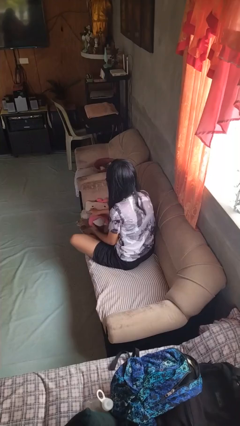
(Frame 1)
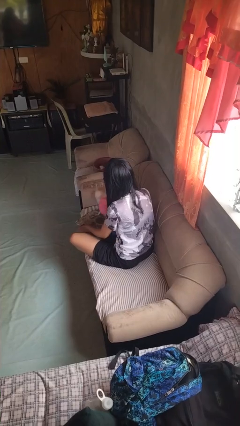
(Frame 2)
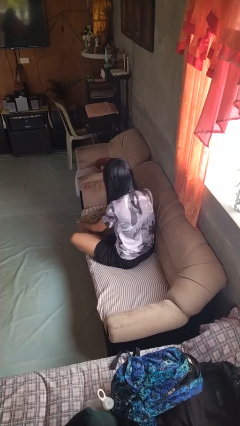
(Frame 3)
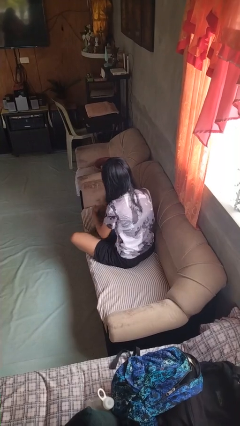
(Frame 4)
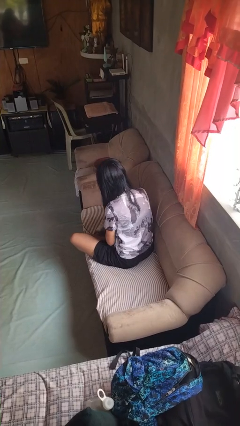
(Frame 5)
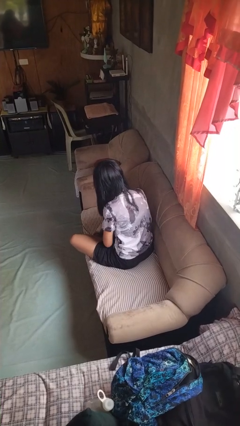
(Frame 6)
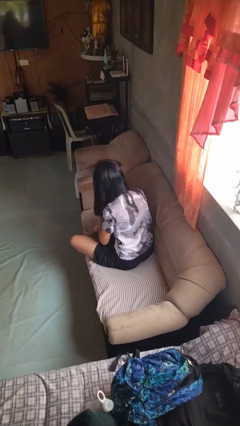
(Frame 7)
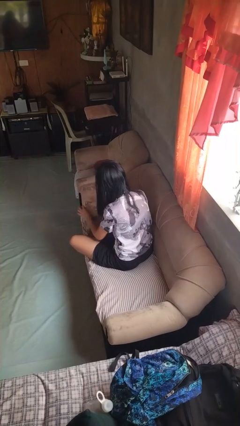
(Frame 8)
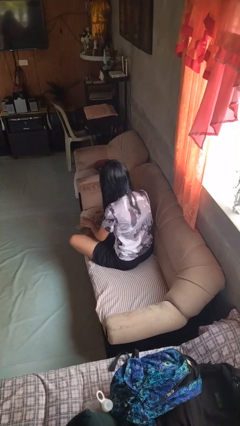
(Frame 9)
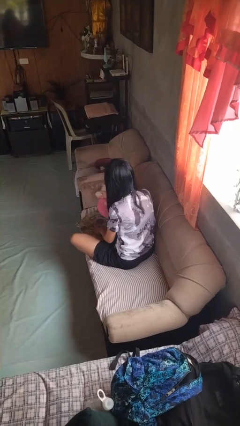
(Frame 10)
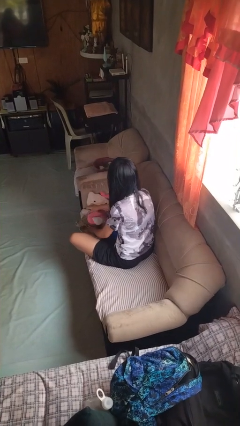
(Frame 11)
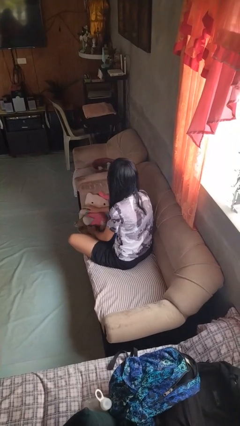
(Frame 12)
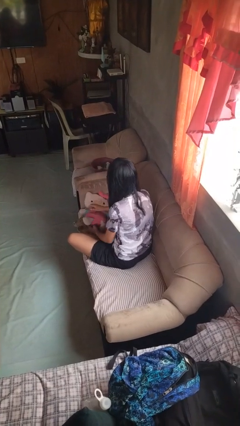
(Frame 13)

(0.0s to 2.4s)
person searches in couch

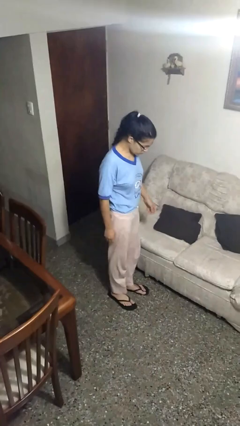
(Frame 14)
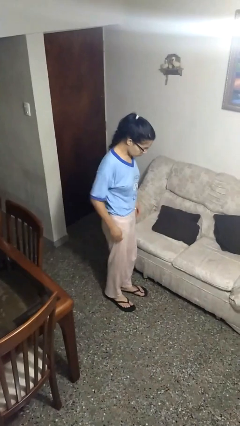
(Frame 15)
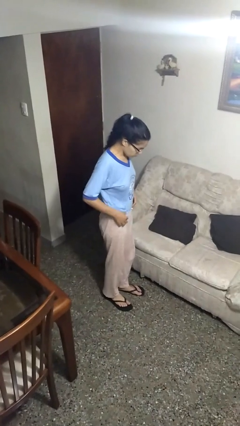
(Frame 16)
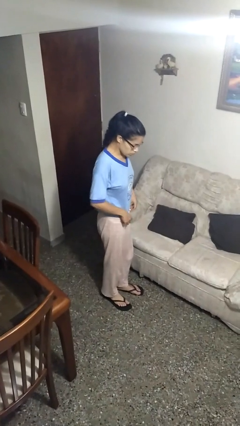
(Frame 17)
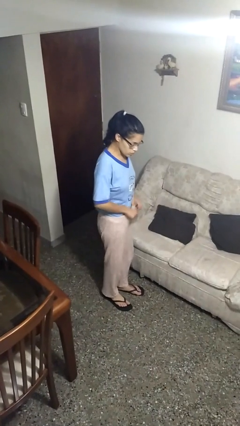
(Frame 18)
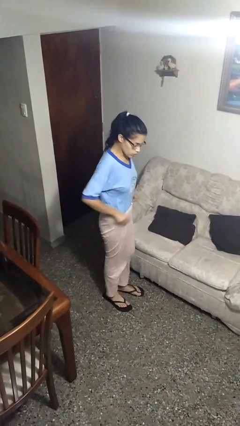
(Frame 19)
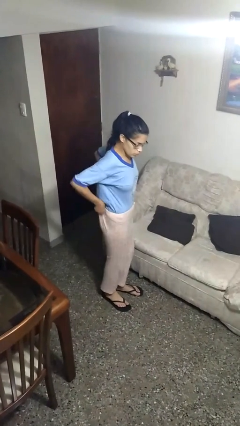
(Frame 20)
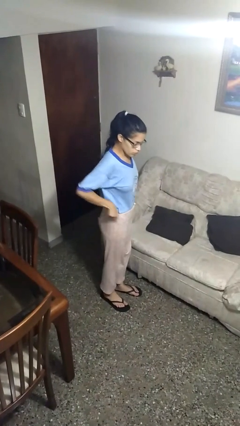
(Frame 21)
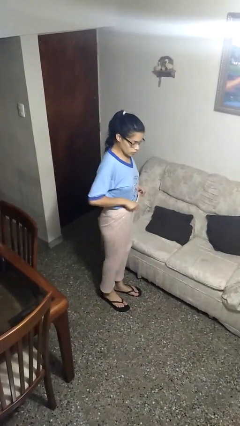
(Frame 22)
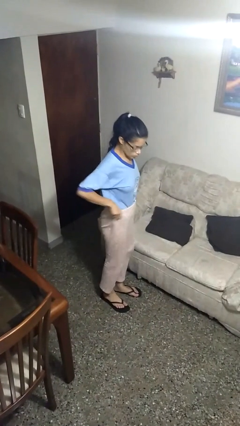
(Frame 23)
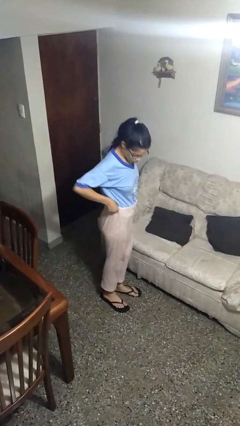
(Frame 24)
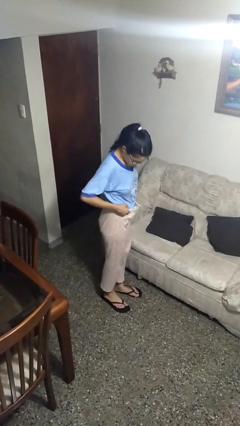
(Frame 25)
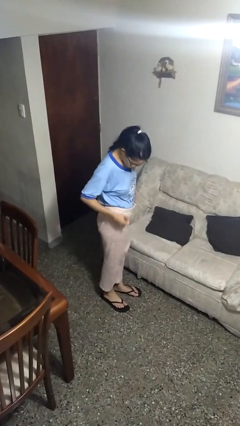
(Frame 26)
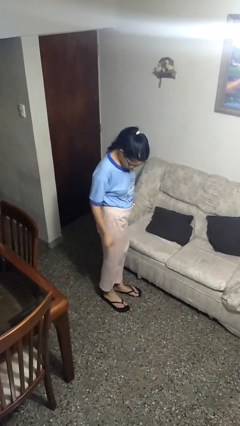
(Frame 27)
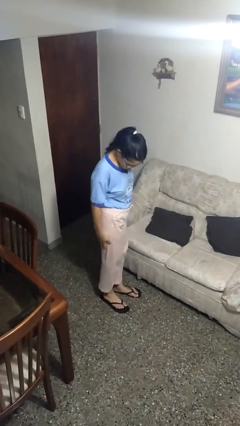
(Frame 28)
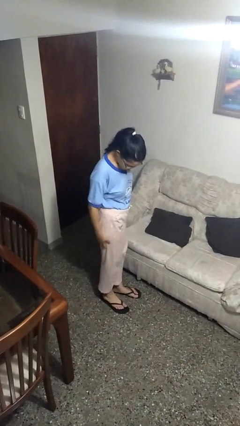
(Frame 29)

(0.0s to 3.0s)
person hikes up pants

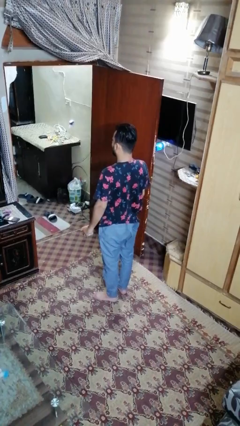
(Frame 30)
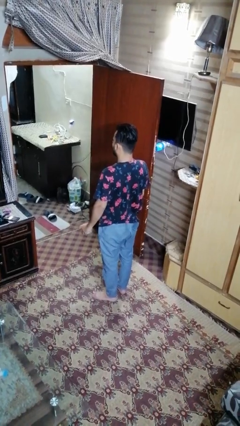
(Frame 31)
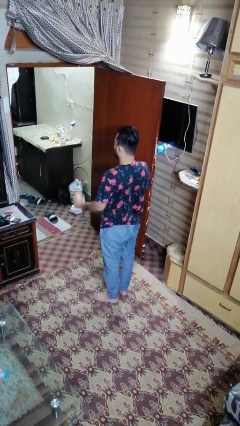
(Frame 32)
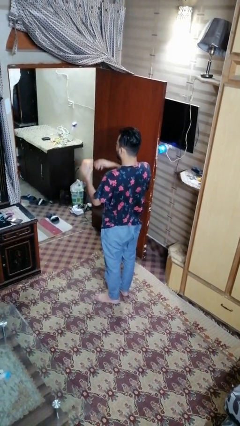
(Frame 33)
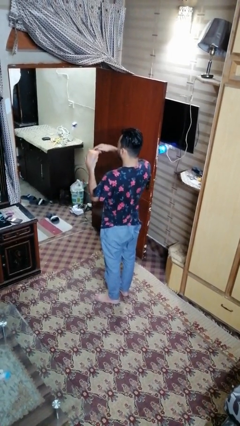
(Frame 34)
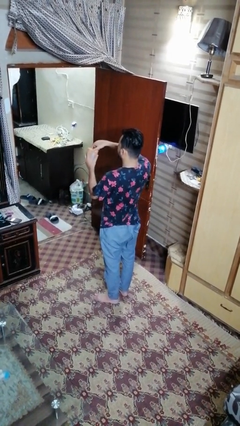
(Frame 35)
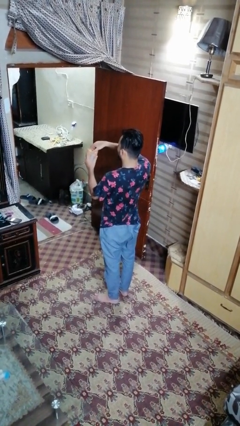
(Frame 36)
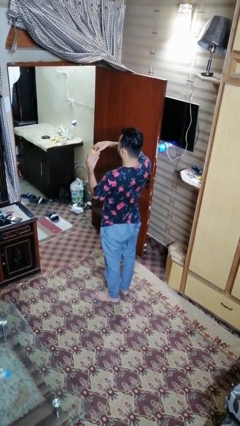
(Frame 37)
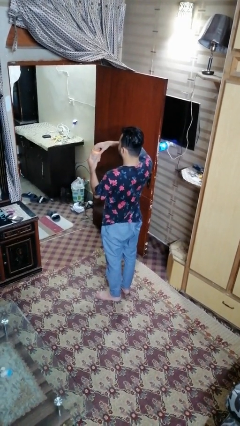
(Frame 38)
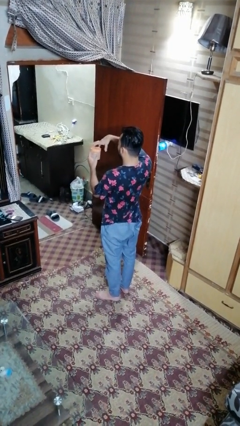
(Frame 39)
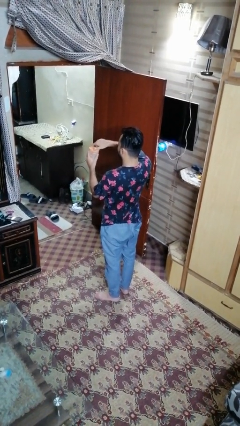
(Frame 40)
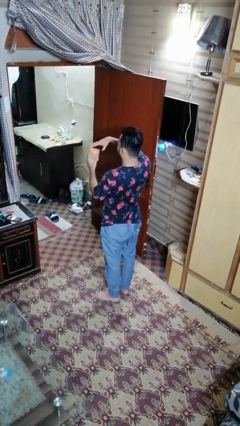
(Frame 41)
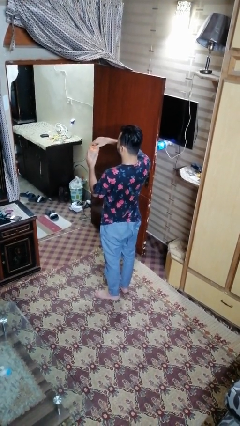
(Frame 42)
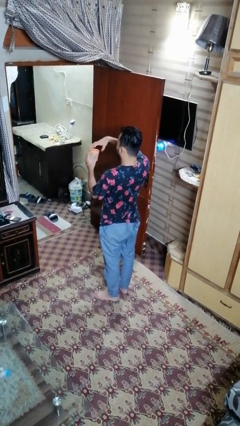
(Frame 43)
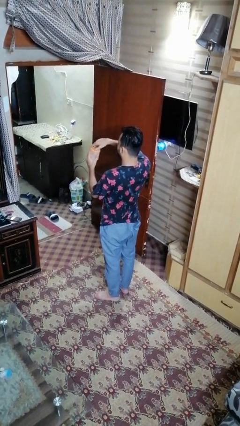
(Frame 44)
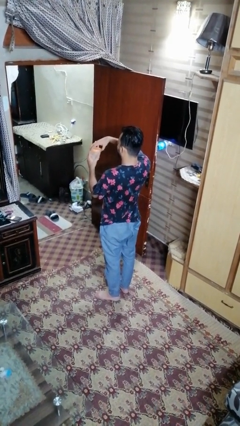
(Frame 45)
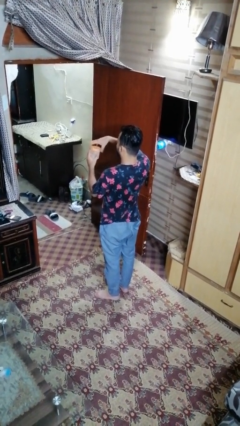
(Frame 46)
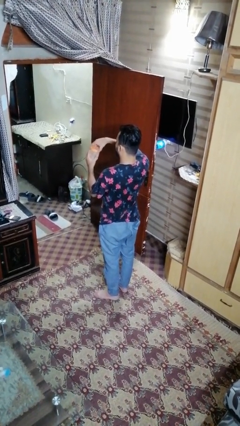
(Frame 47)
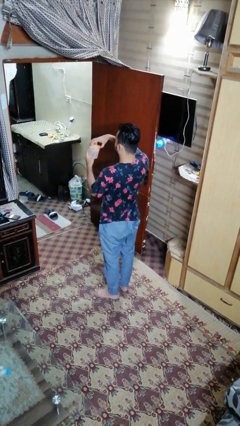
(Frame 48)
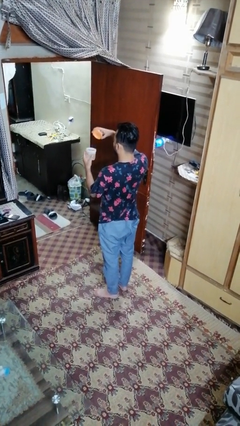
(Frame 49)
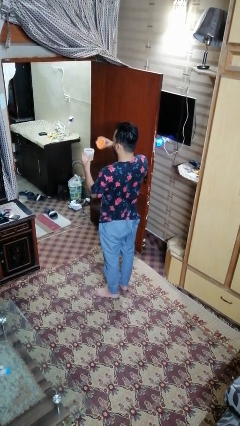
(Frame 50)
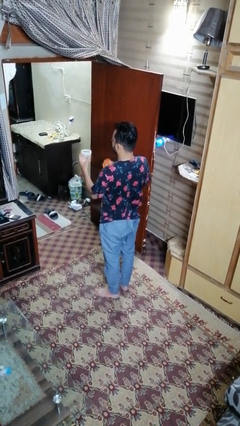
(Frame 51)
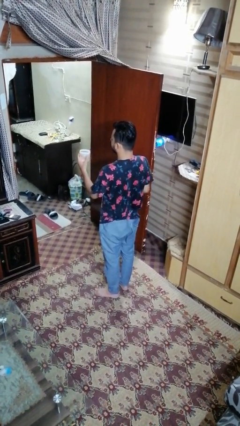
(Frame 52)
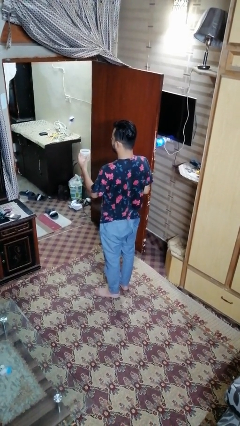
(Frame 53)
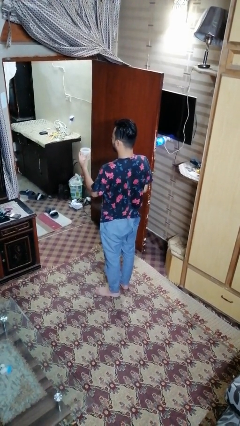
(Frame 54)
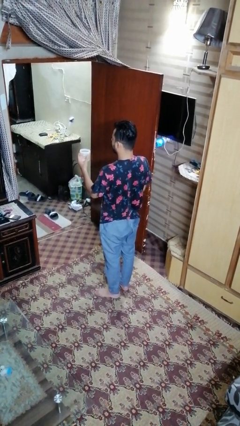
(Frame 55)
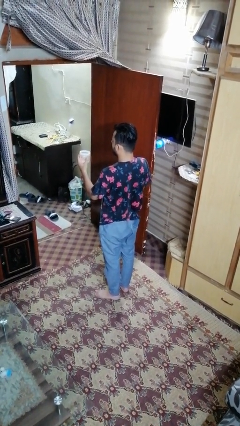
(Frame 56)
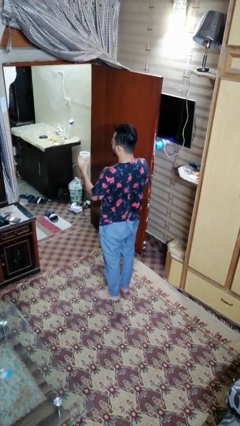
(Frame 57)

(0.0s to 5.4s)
person opens jar

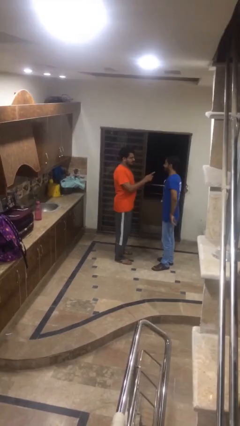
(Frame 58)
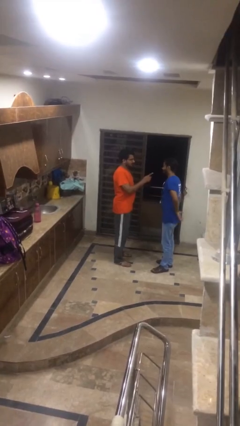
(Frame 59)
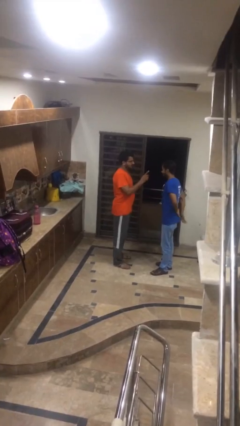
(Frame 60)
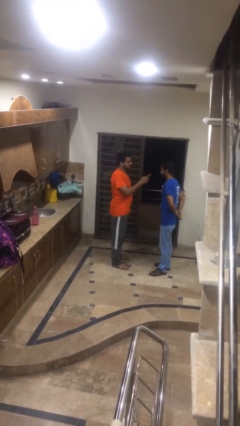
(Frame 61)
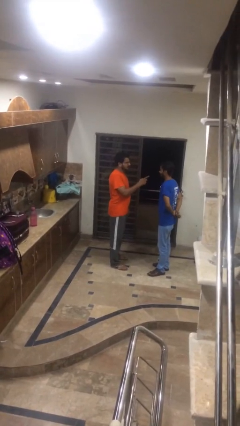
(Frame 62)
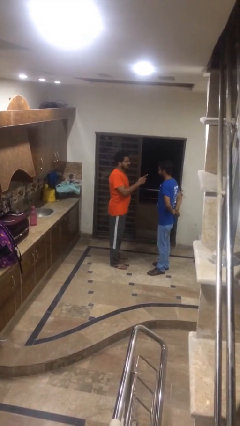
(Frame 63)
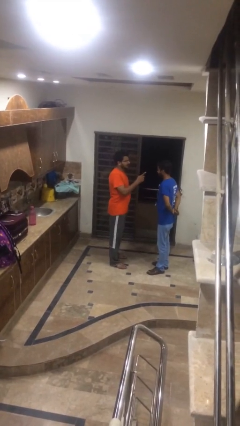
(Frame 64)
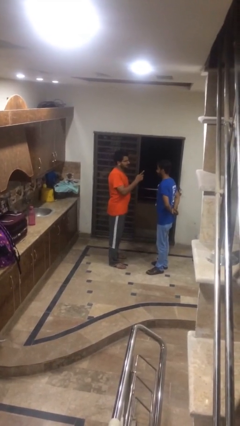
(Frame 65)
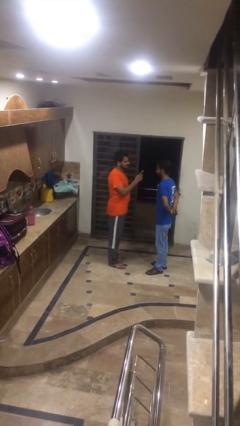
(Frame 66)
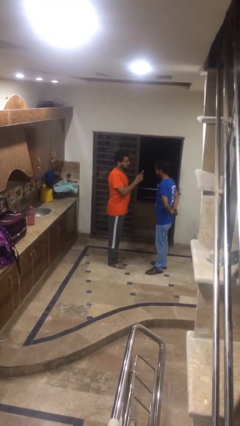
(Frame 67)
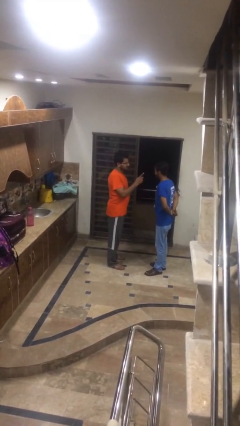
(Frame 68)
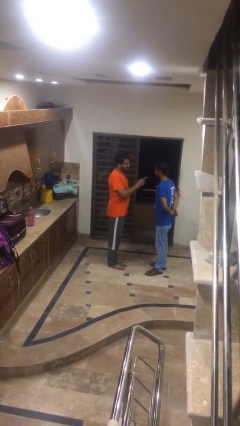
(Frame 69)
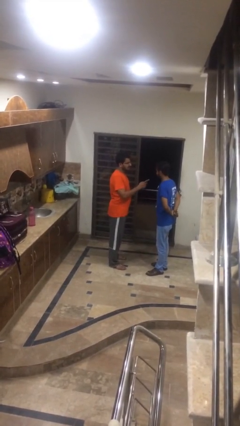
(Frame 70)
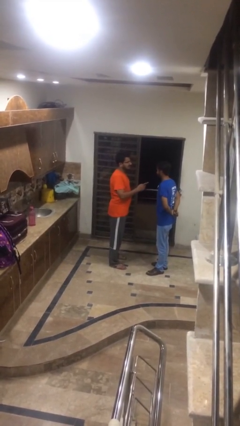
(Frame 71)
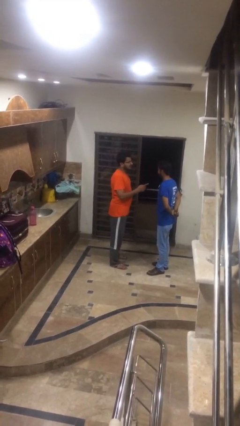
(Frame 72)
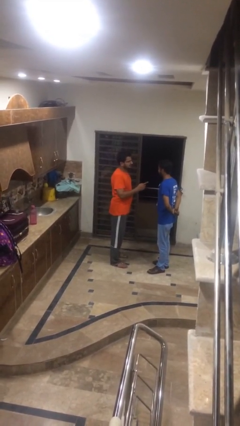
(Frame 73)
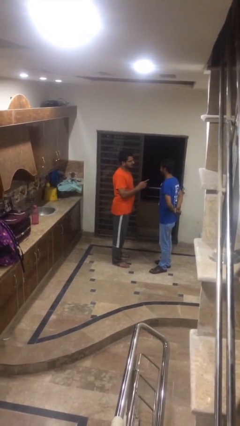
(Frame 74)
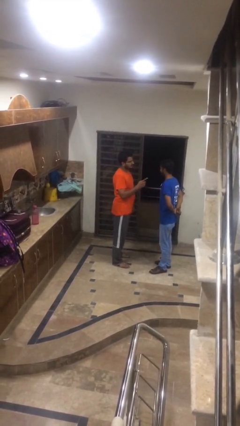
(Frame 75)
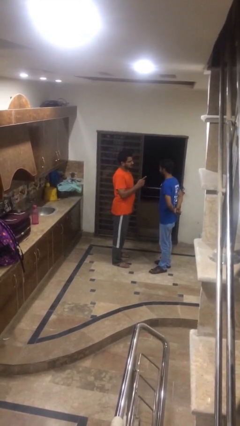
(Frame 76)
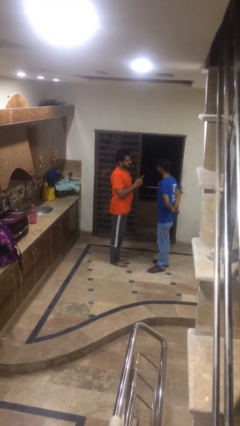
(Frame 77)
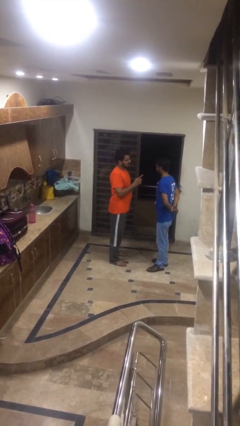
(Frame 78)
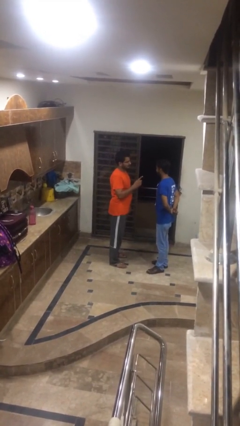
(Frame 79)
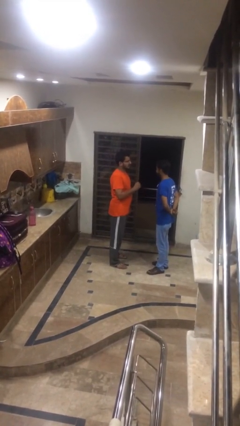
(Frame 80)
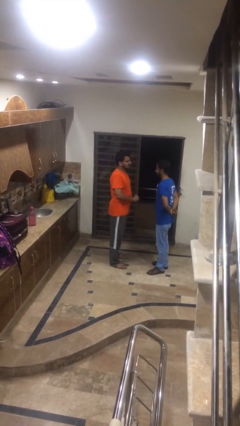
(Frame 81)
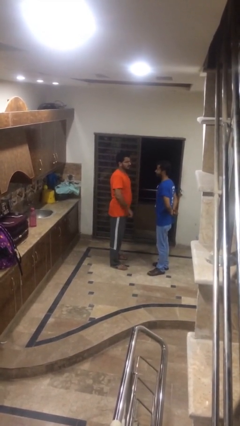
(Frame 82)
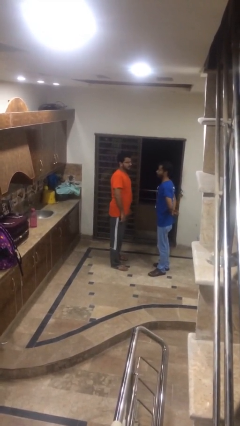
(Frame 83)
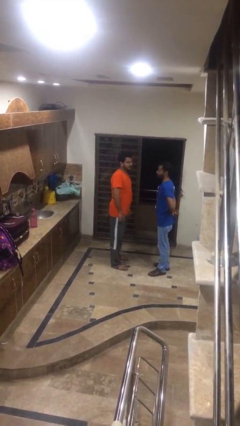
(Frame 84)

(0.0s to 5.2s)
person talks to person

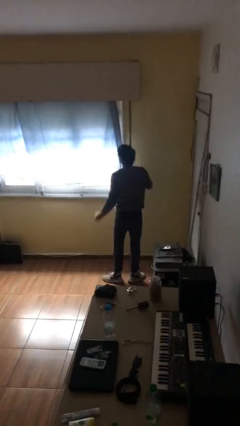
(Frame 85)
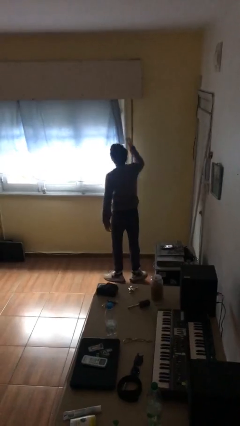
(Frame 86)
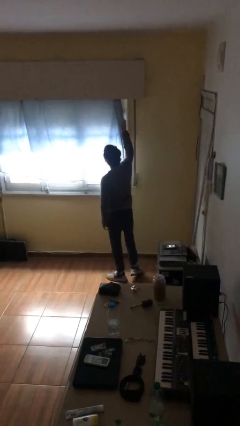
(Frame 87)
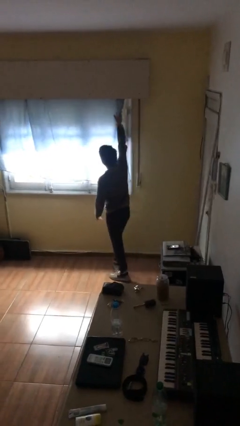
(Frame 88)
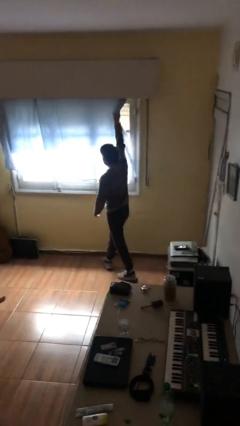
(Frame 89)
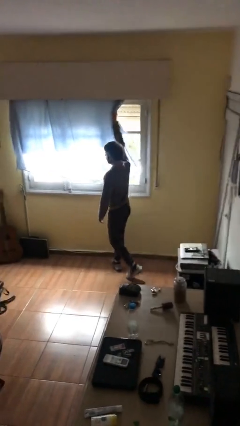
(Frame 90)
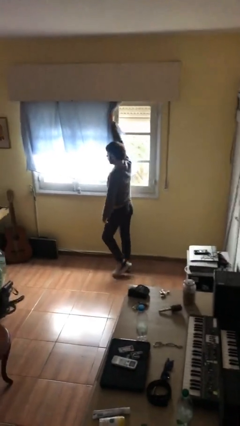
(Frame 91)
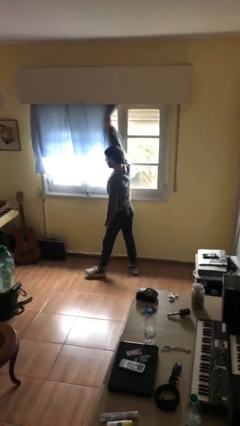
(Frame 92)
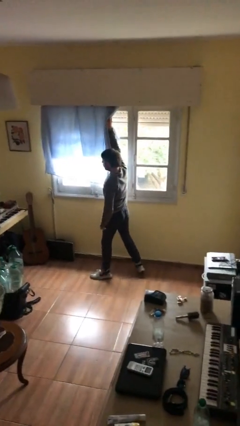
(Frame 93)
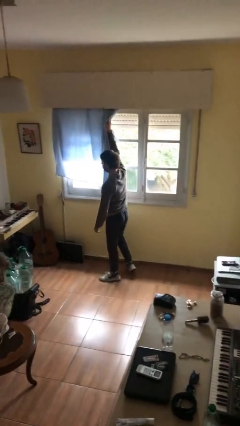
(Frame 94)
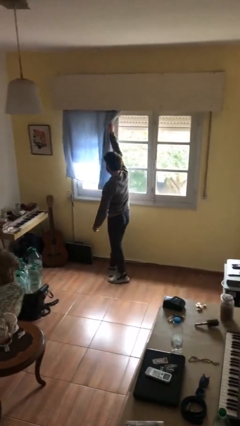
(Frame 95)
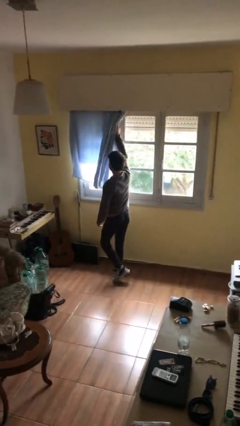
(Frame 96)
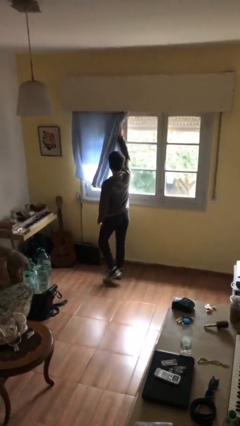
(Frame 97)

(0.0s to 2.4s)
person opens curtains
